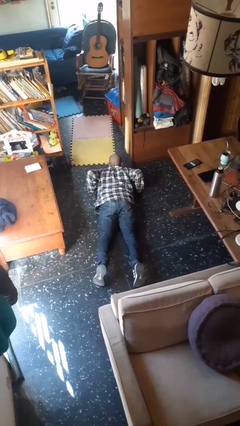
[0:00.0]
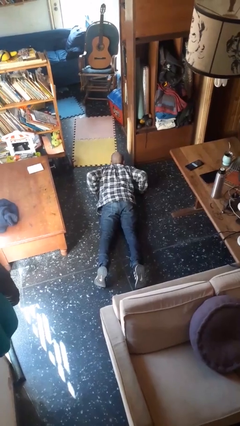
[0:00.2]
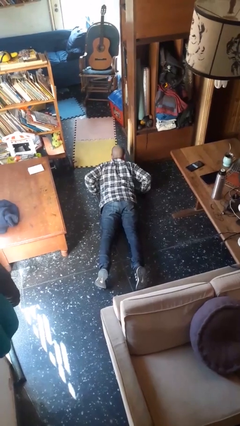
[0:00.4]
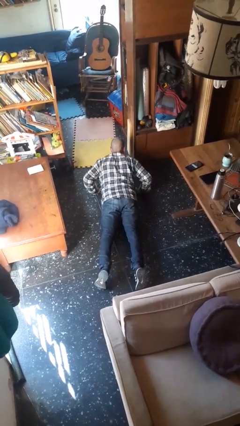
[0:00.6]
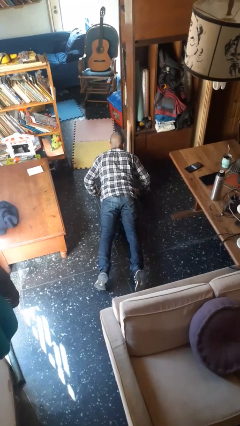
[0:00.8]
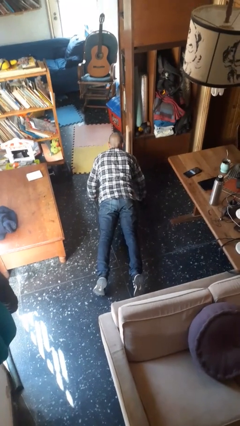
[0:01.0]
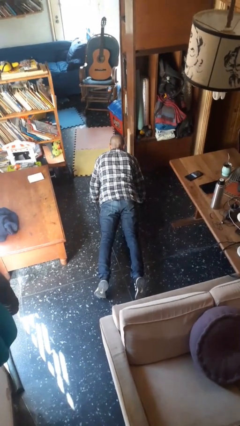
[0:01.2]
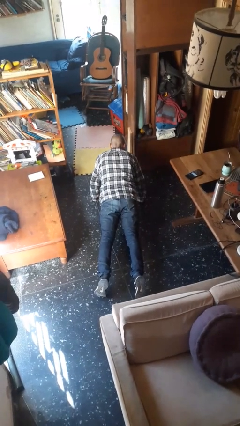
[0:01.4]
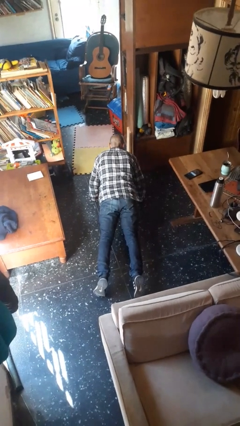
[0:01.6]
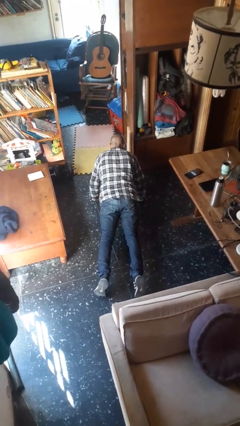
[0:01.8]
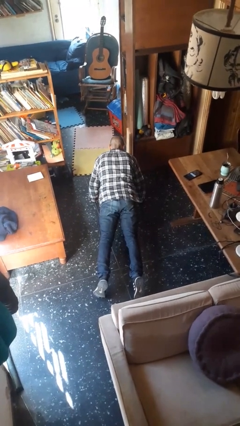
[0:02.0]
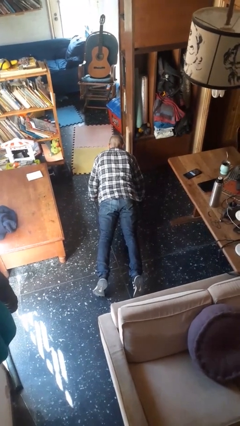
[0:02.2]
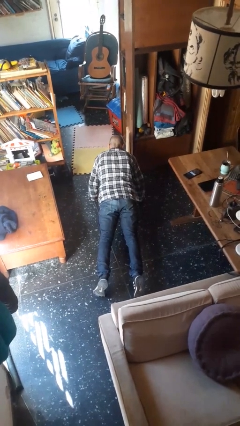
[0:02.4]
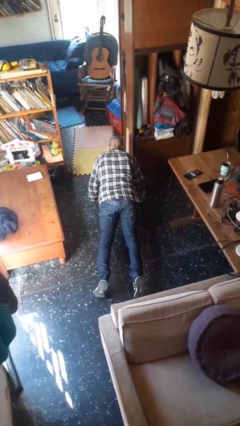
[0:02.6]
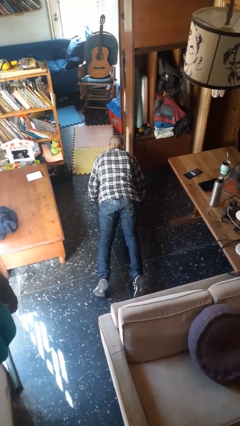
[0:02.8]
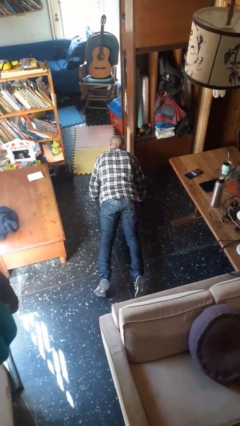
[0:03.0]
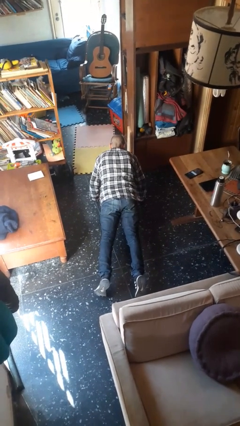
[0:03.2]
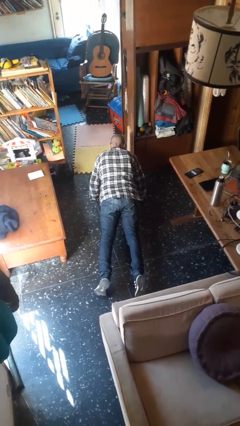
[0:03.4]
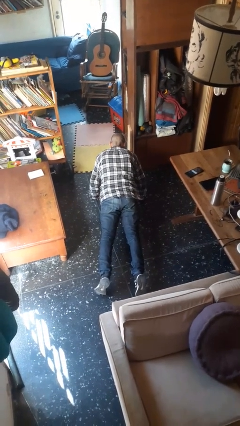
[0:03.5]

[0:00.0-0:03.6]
person exercises with pushup

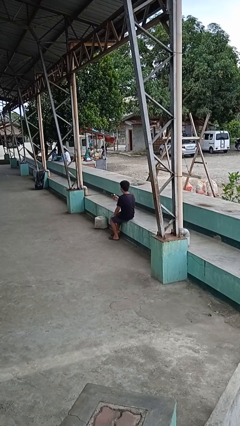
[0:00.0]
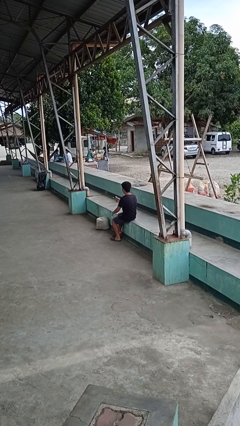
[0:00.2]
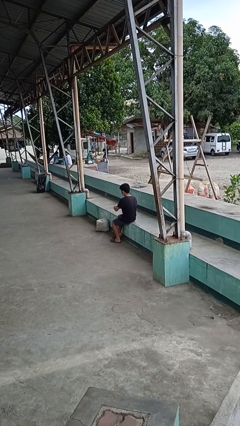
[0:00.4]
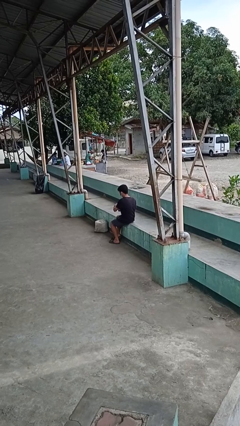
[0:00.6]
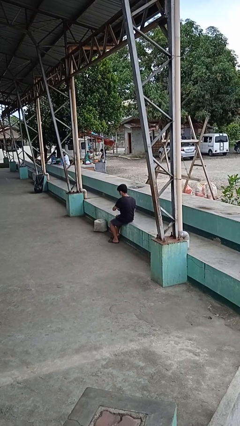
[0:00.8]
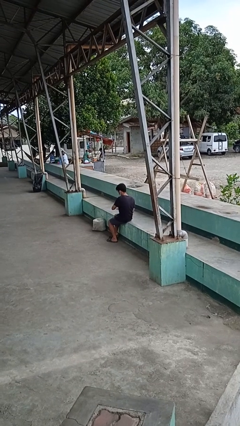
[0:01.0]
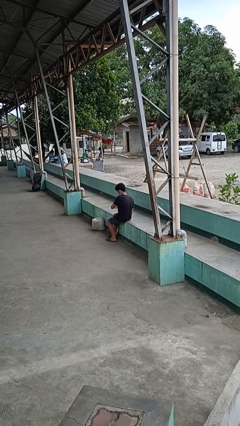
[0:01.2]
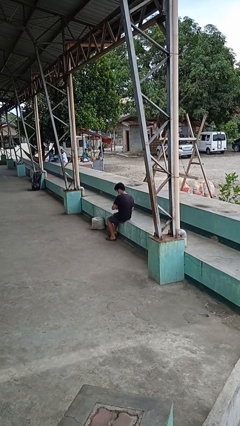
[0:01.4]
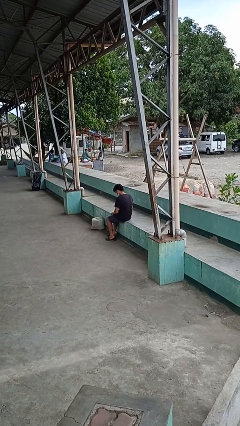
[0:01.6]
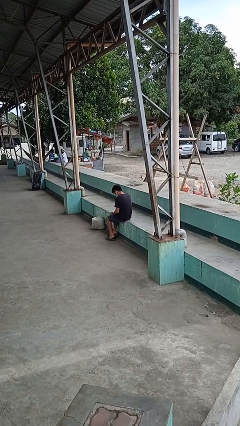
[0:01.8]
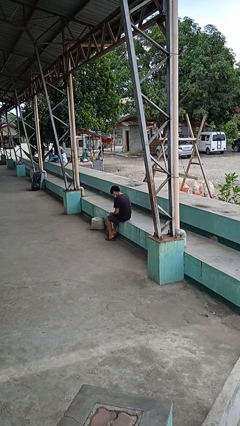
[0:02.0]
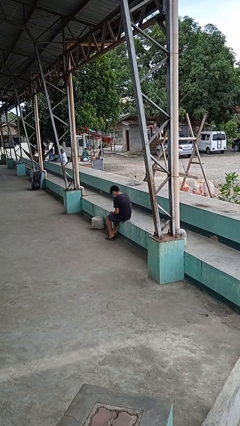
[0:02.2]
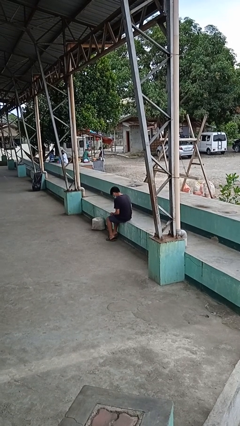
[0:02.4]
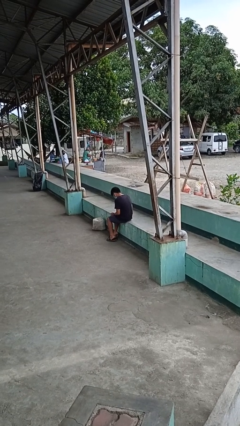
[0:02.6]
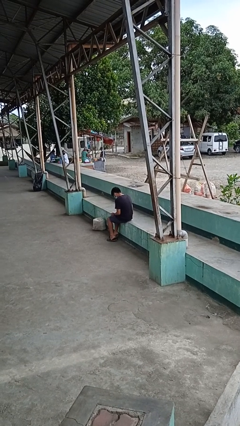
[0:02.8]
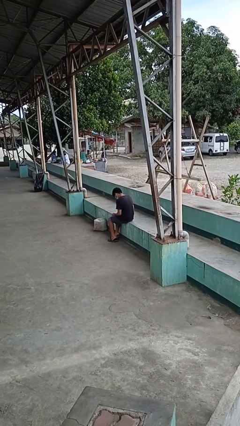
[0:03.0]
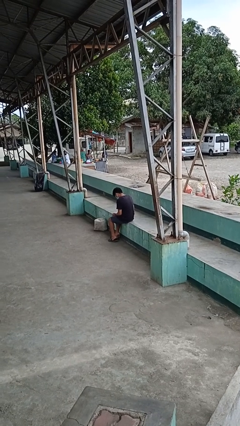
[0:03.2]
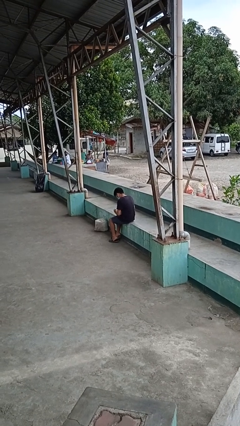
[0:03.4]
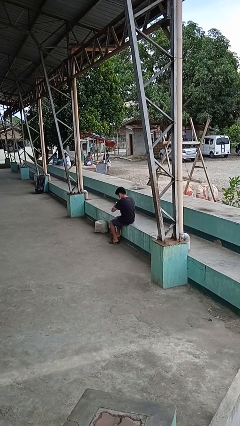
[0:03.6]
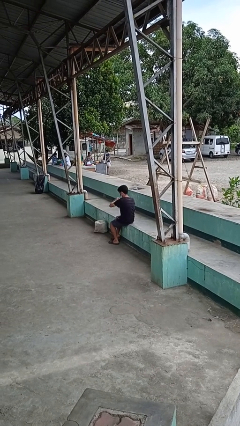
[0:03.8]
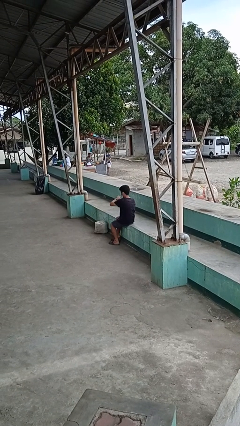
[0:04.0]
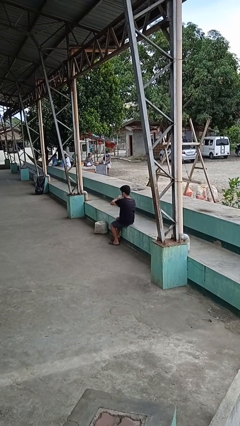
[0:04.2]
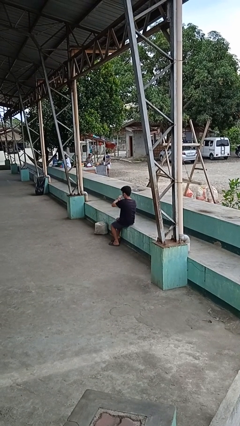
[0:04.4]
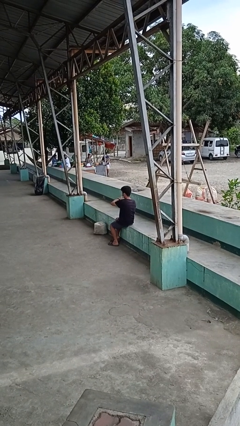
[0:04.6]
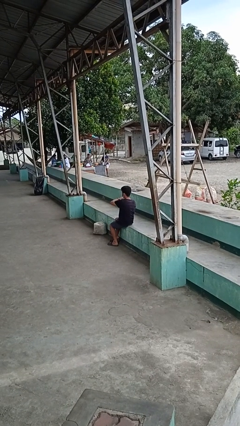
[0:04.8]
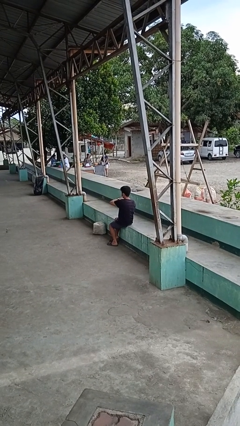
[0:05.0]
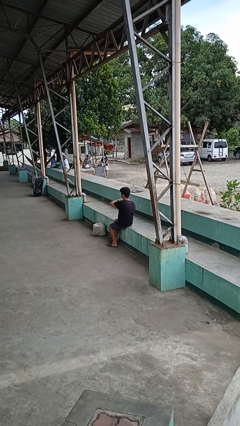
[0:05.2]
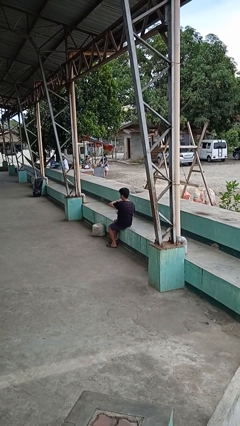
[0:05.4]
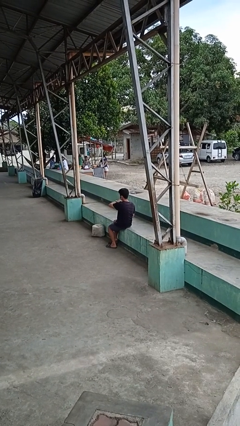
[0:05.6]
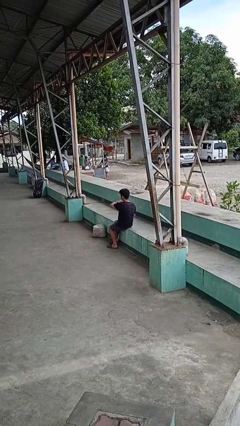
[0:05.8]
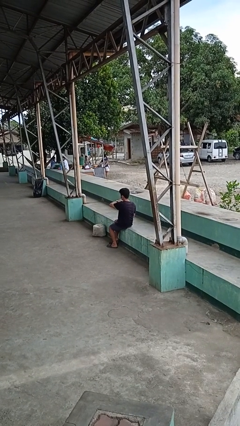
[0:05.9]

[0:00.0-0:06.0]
person puts on wristwatch

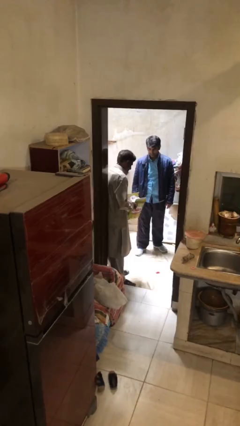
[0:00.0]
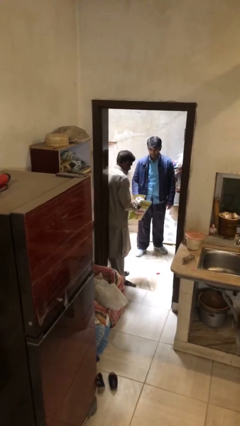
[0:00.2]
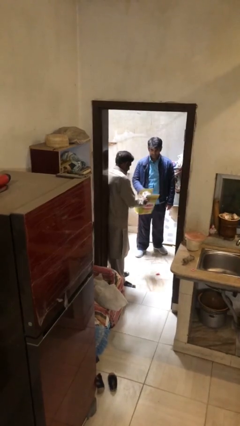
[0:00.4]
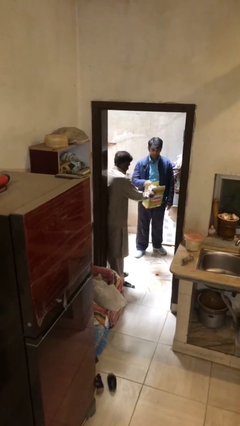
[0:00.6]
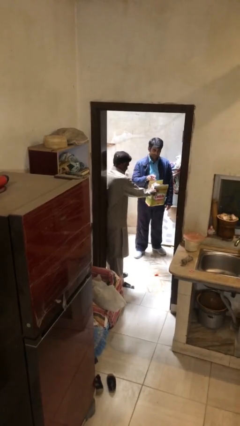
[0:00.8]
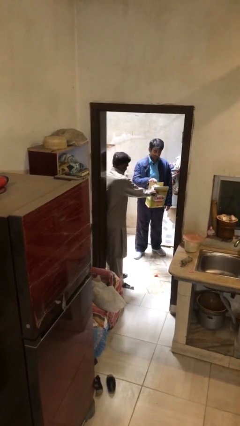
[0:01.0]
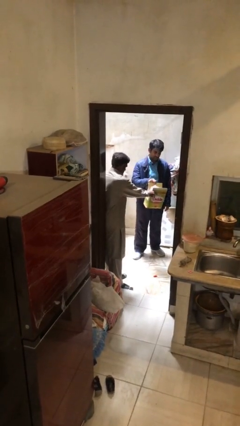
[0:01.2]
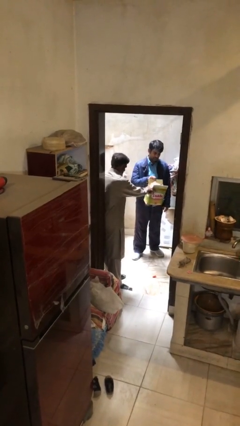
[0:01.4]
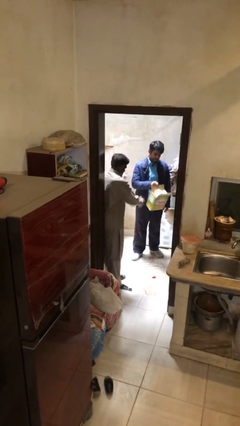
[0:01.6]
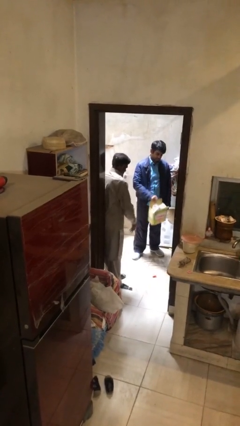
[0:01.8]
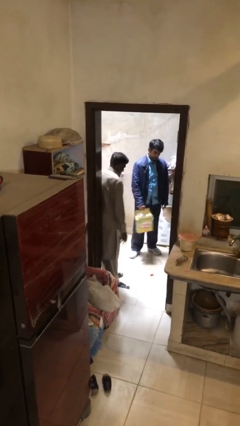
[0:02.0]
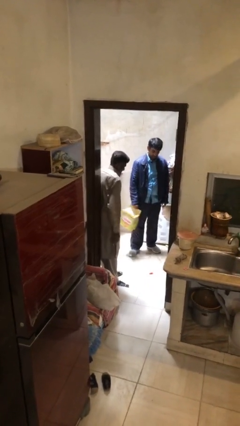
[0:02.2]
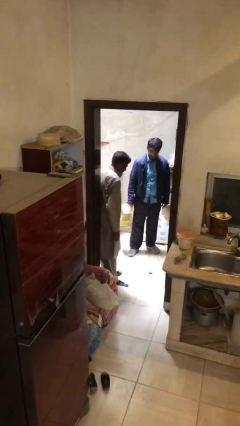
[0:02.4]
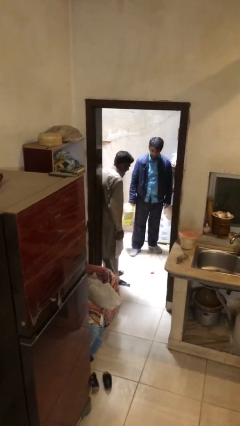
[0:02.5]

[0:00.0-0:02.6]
person transfers object to person

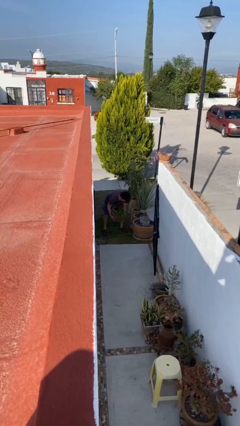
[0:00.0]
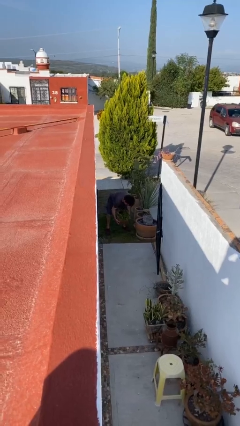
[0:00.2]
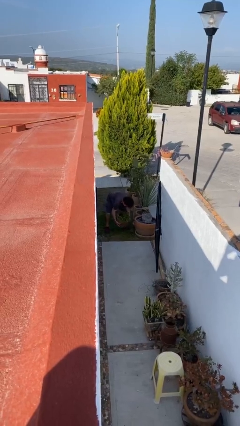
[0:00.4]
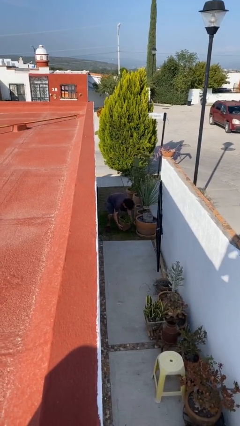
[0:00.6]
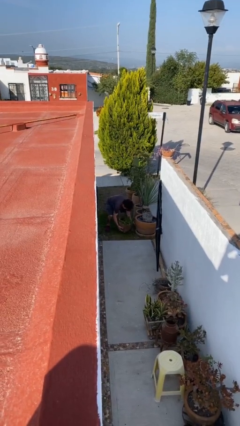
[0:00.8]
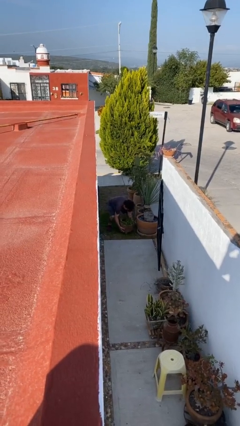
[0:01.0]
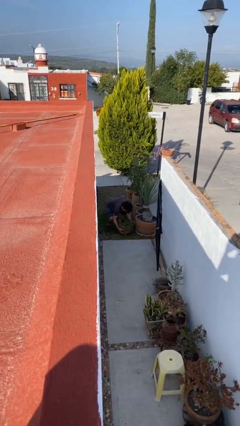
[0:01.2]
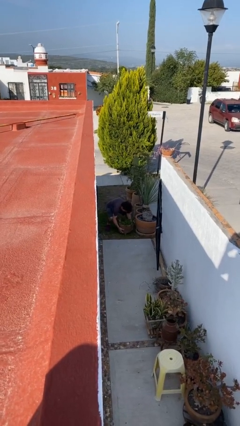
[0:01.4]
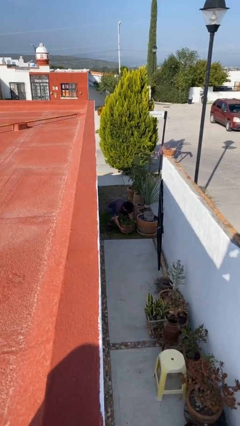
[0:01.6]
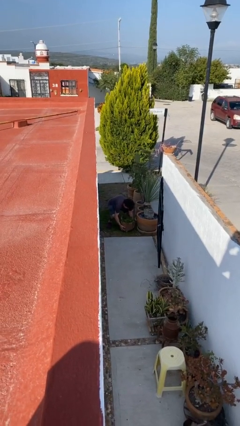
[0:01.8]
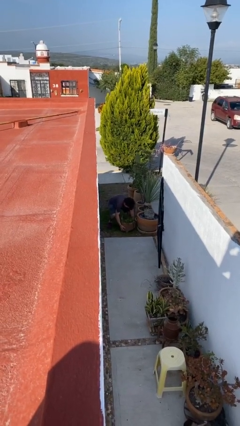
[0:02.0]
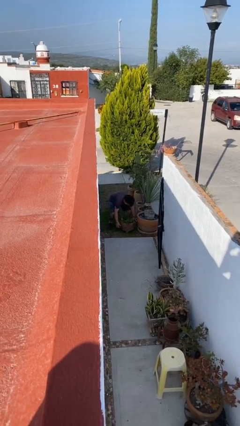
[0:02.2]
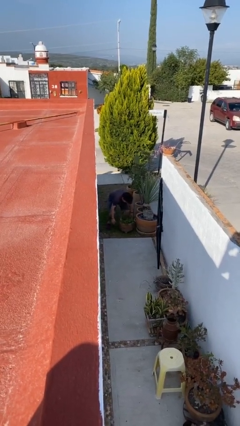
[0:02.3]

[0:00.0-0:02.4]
person puts down object on floor

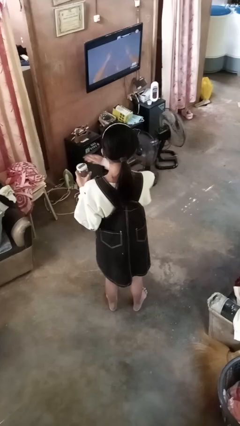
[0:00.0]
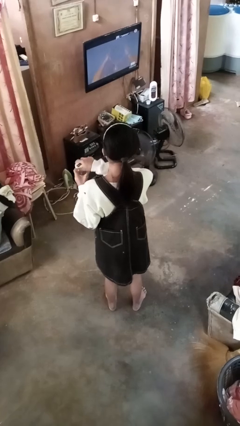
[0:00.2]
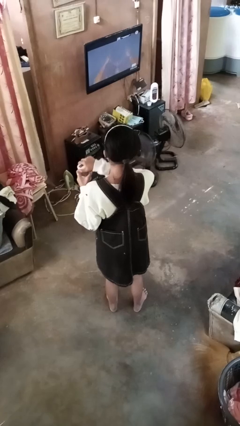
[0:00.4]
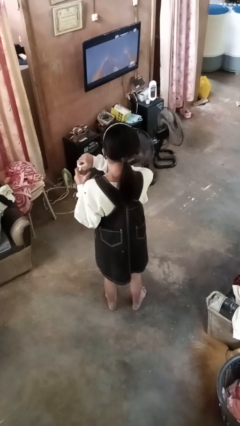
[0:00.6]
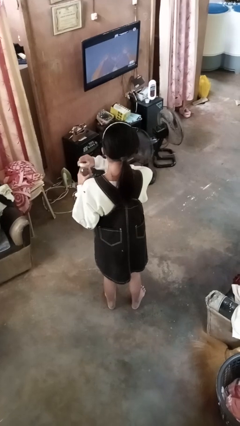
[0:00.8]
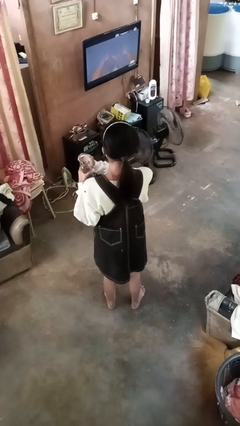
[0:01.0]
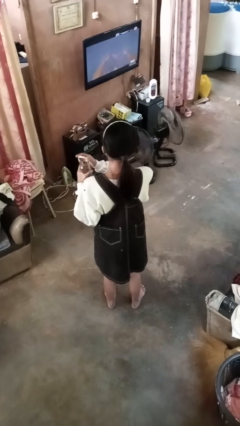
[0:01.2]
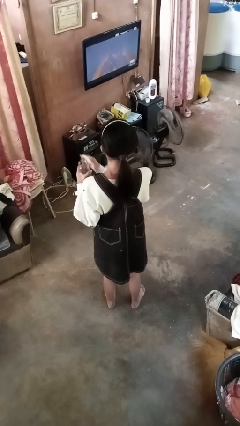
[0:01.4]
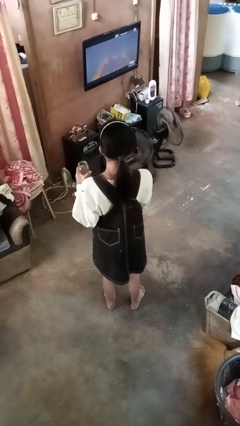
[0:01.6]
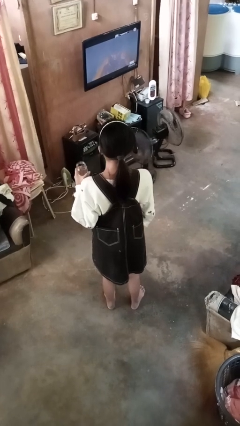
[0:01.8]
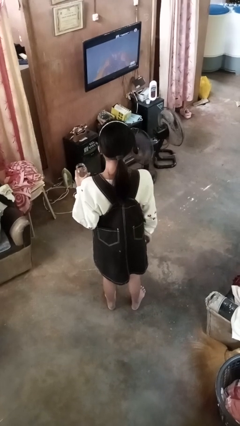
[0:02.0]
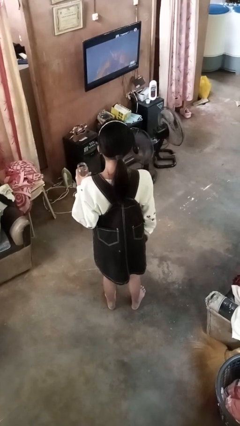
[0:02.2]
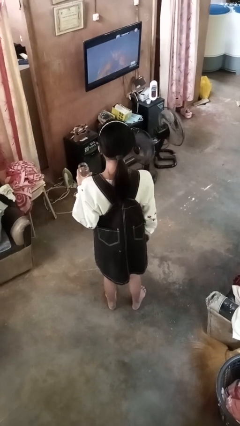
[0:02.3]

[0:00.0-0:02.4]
person opens jar

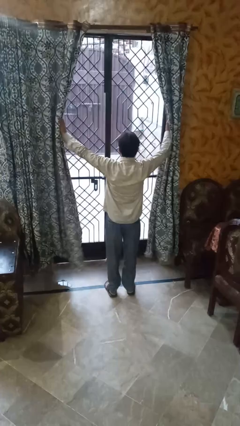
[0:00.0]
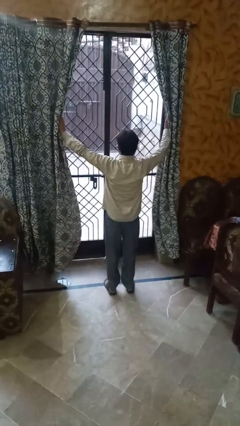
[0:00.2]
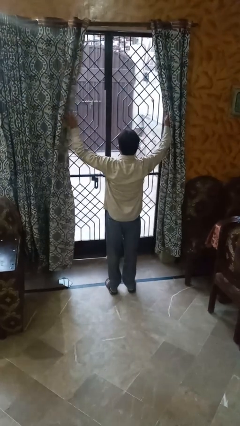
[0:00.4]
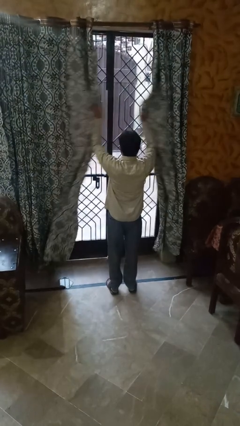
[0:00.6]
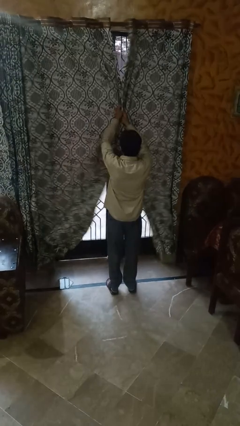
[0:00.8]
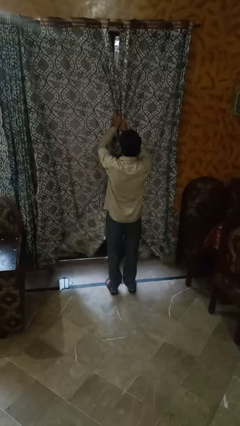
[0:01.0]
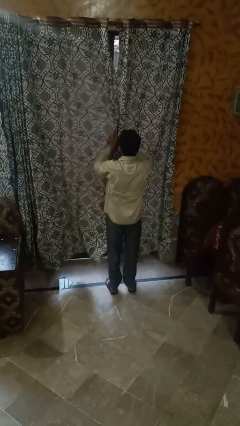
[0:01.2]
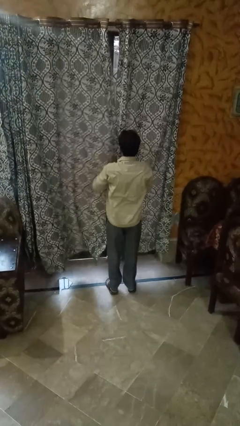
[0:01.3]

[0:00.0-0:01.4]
person closes curtains
